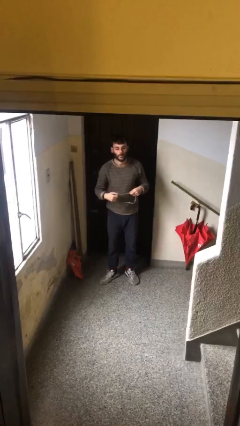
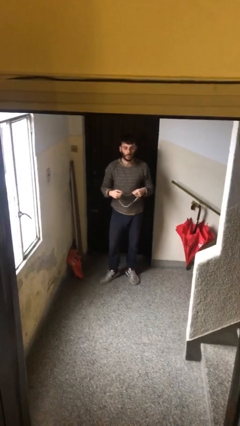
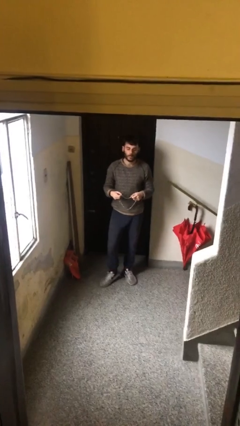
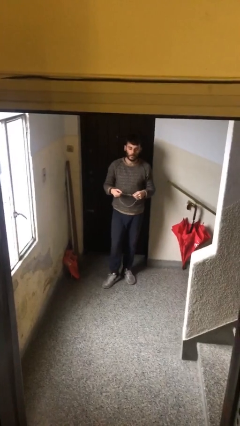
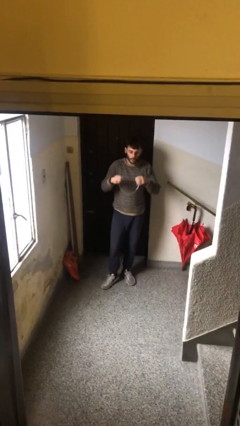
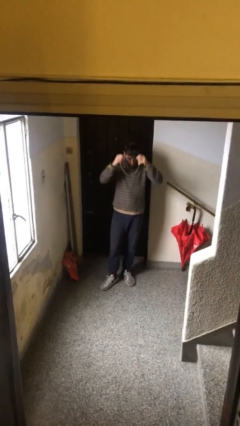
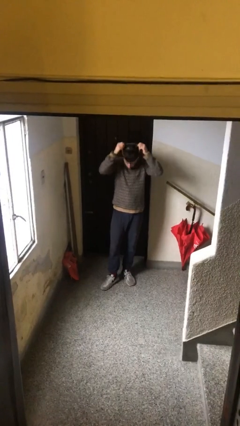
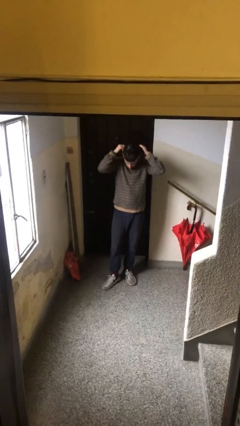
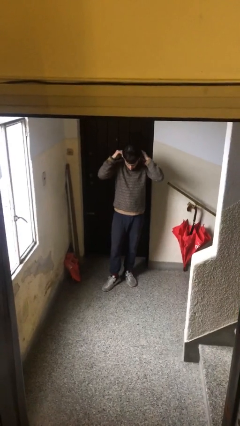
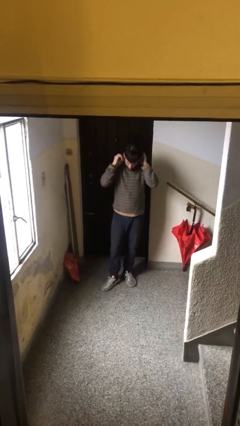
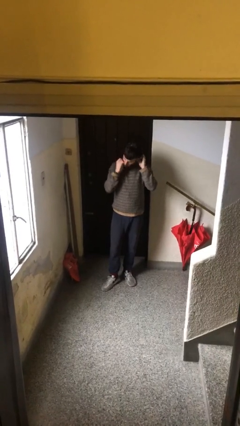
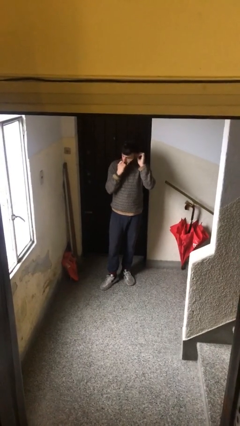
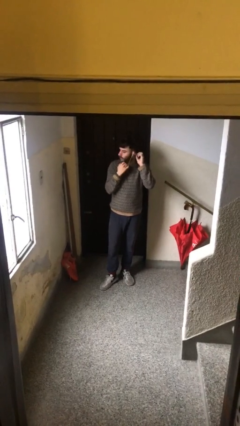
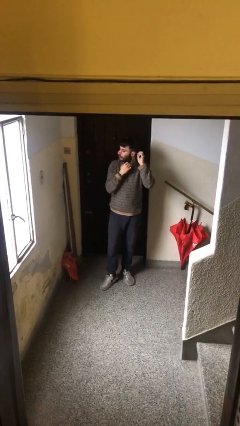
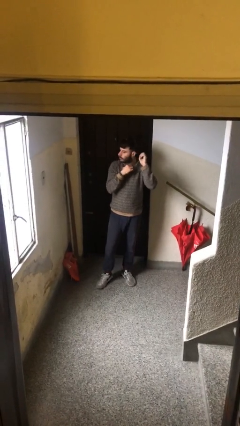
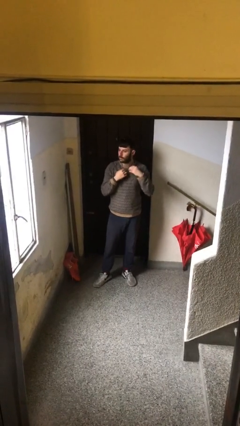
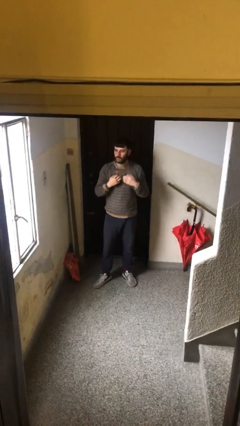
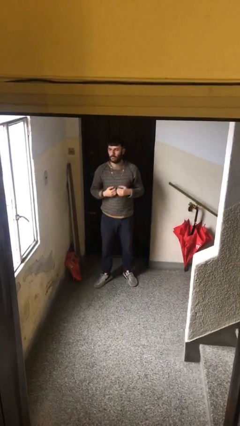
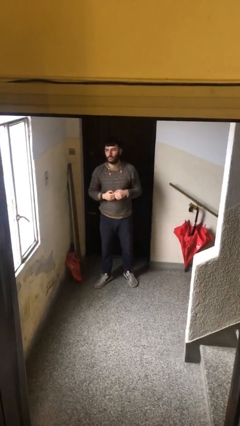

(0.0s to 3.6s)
person puts on necklace

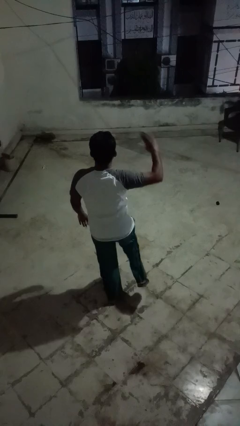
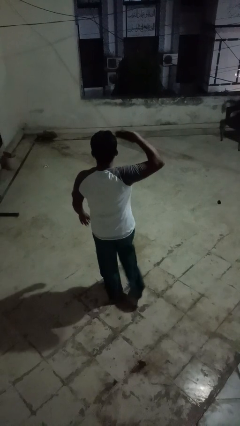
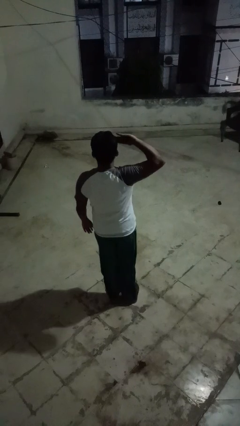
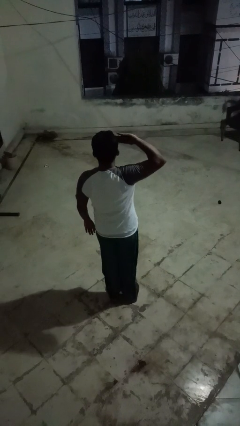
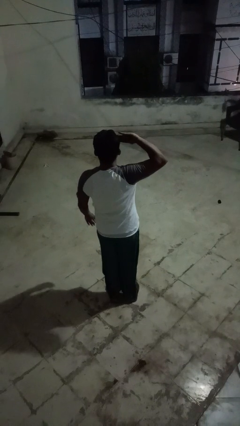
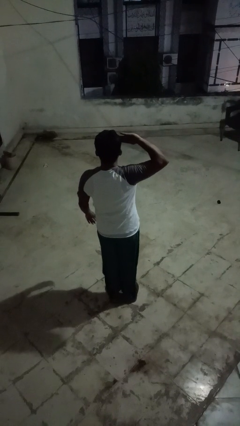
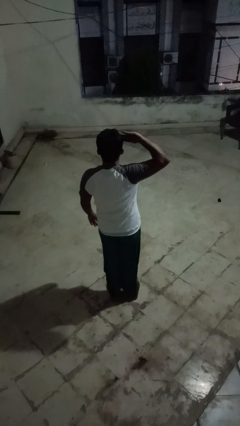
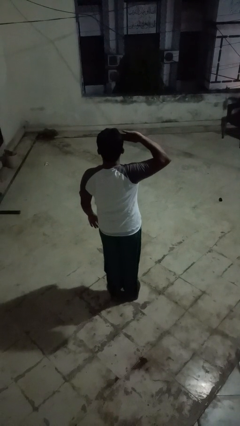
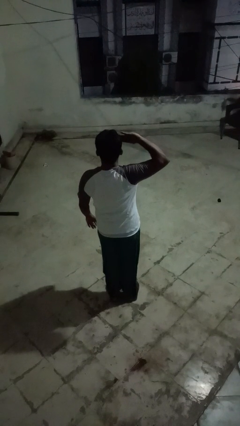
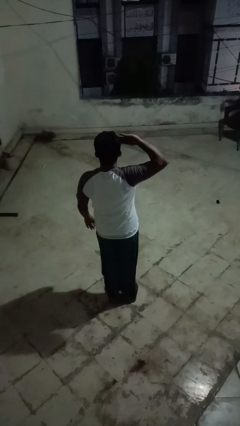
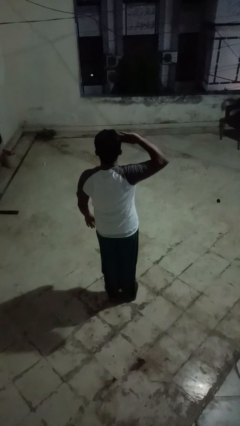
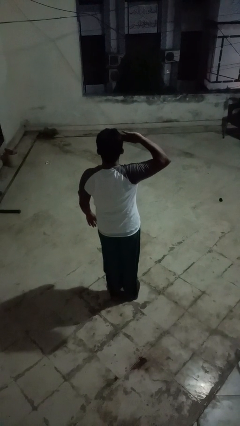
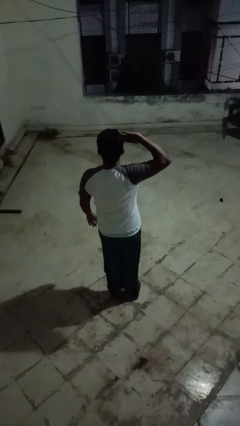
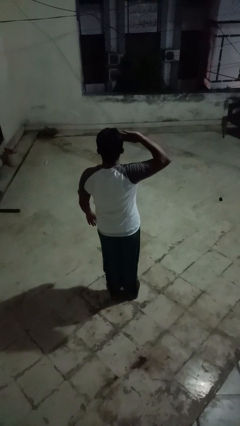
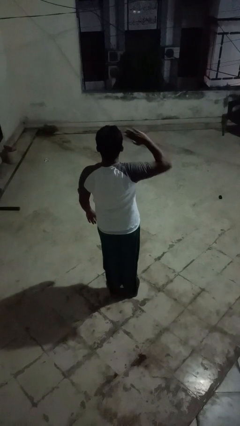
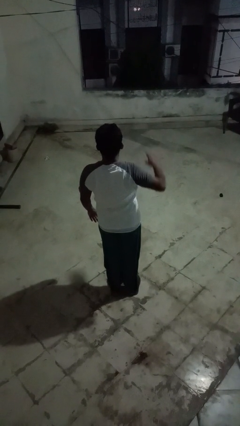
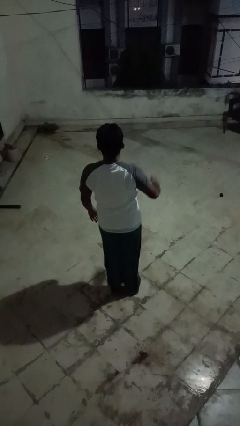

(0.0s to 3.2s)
person salutes

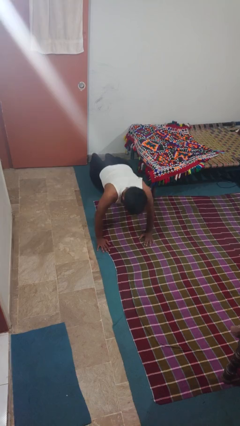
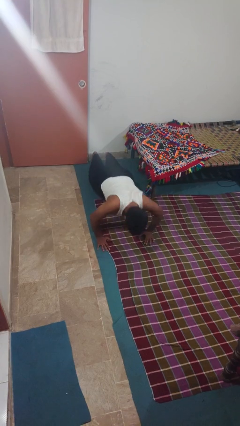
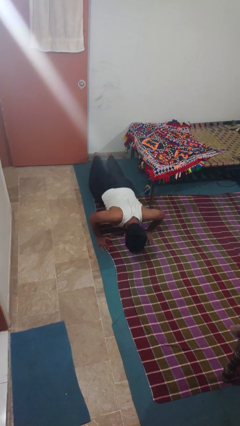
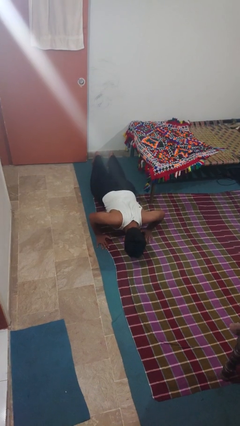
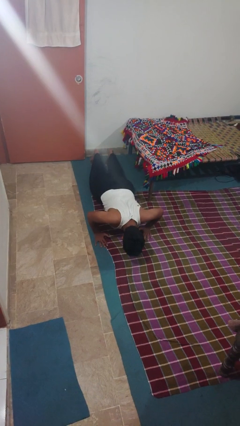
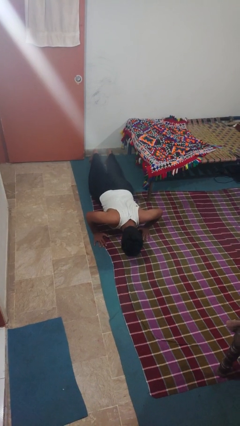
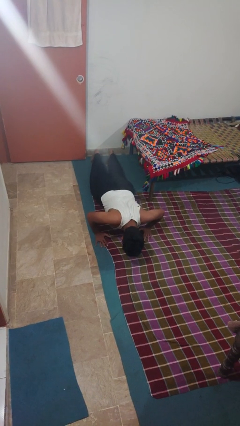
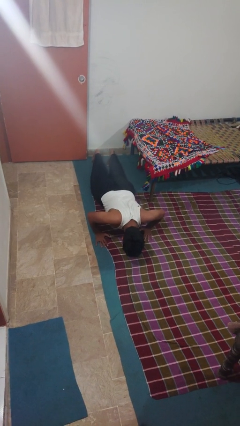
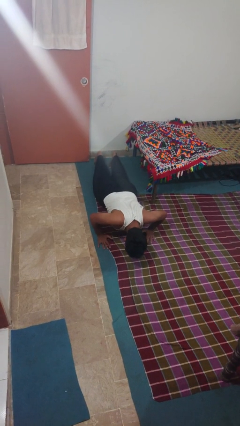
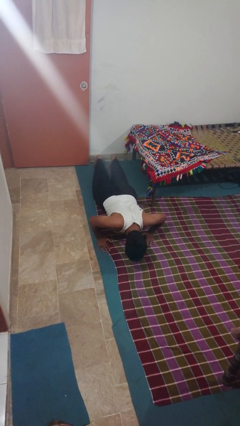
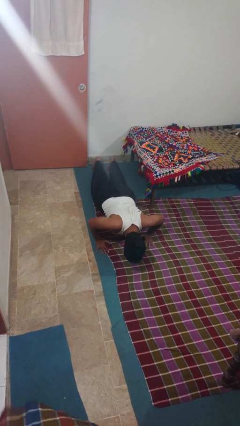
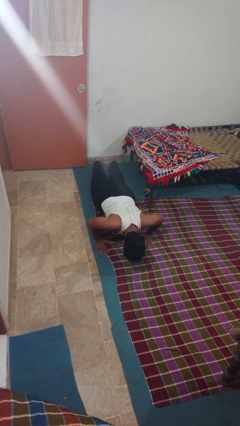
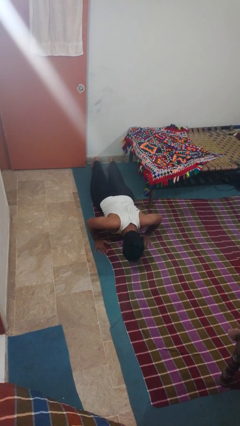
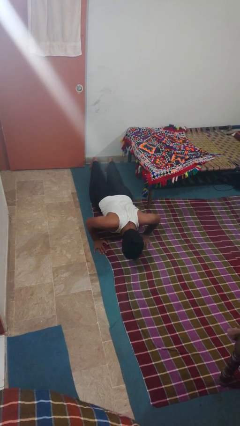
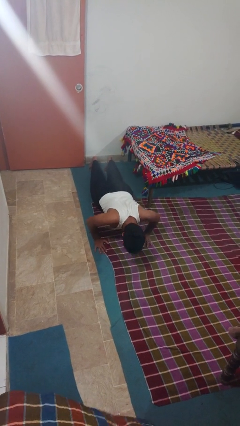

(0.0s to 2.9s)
person exercises with pushup

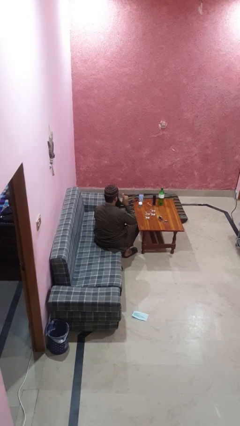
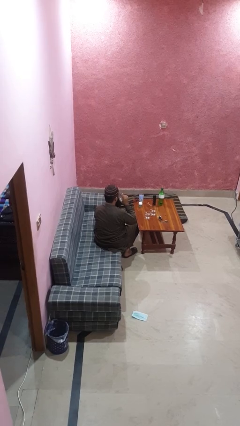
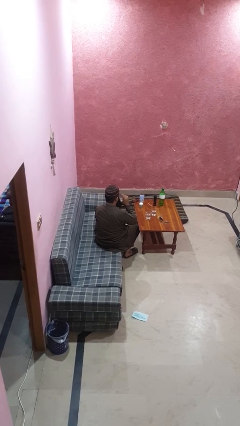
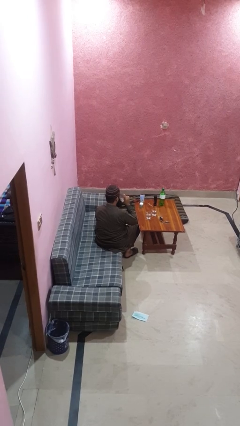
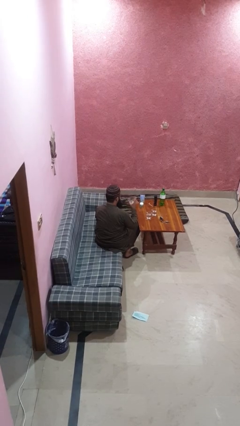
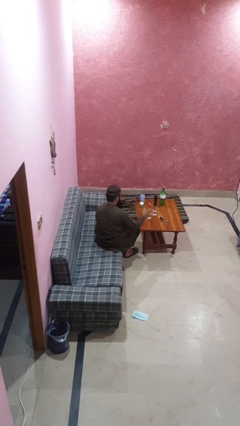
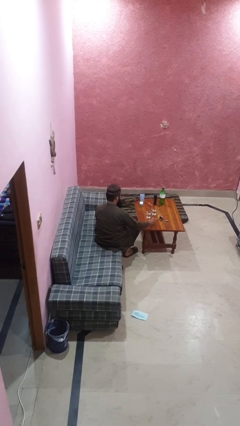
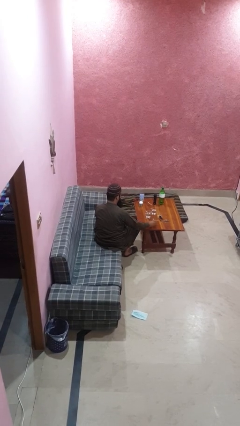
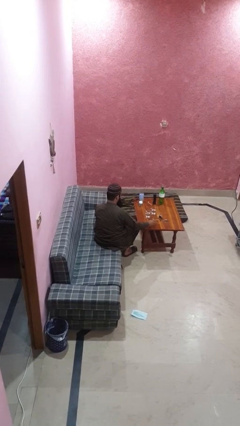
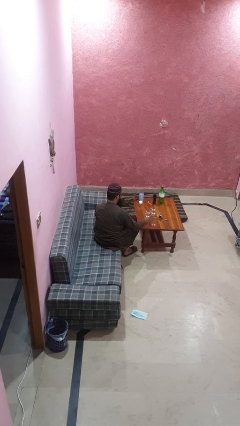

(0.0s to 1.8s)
person puts down object on table

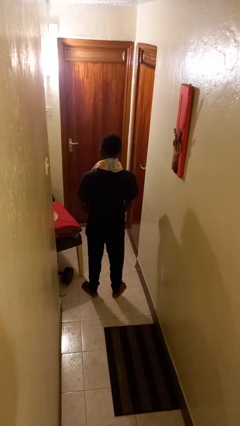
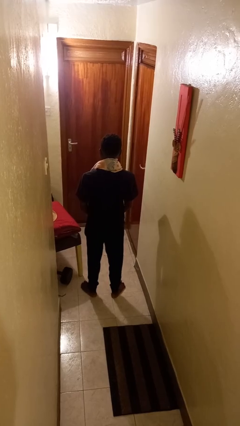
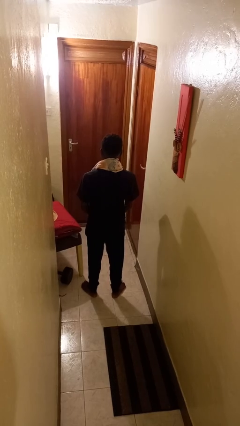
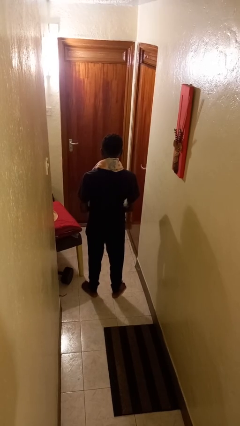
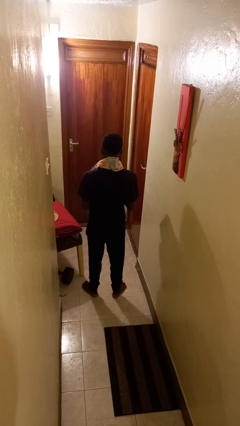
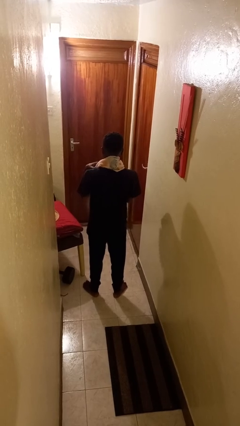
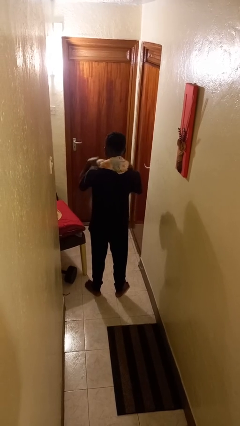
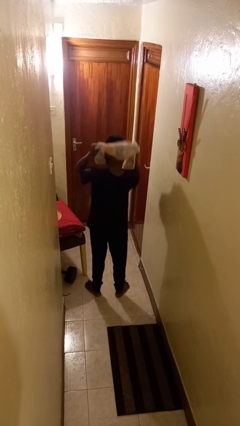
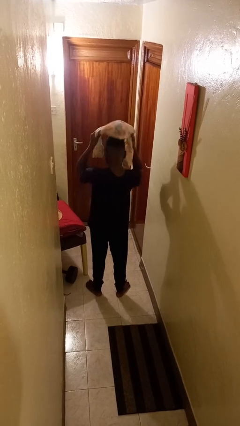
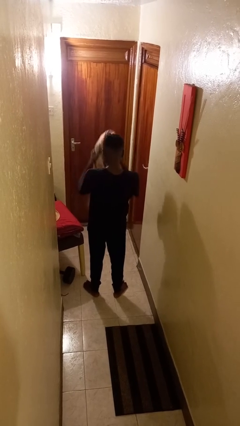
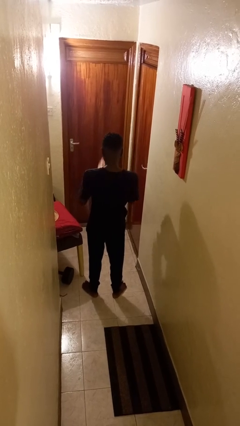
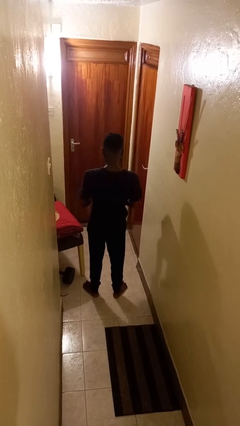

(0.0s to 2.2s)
person takes off scarf

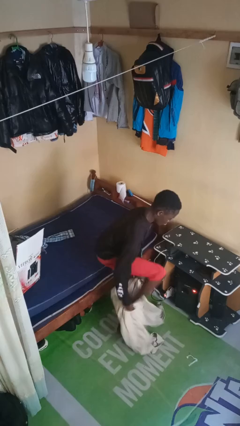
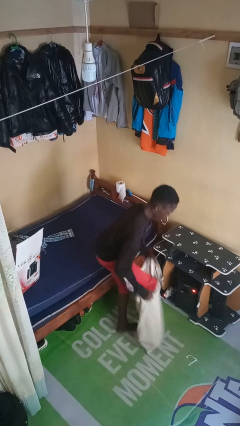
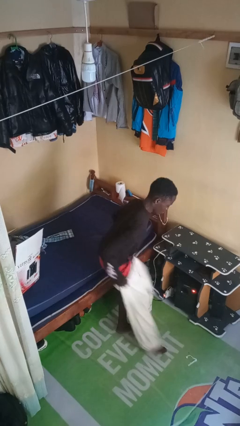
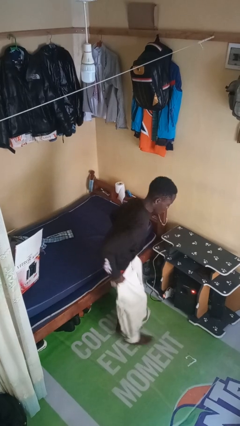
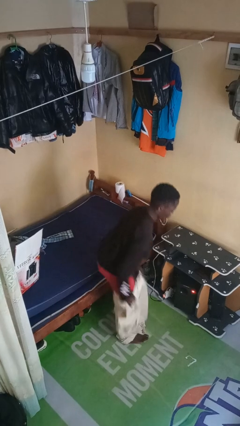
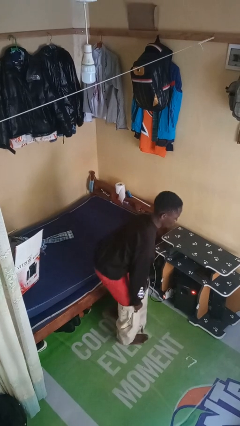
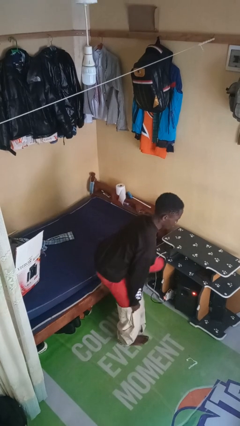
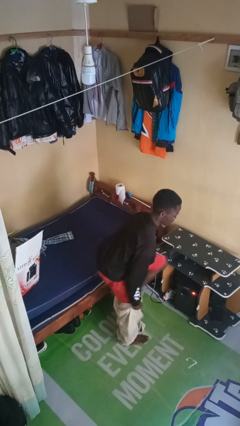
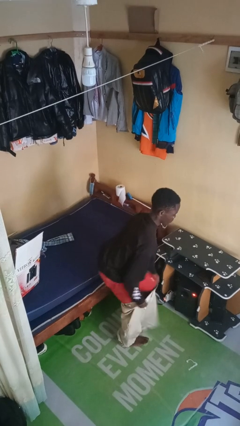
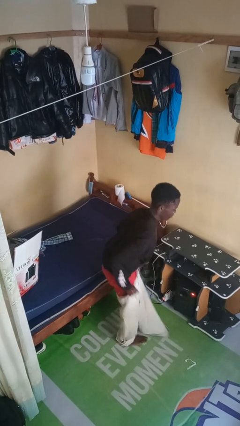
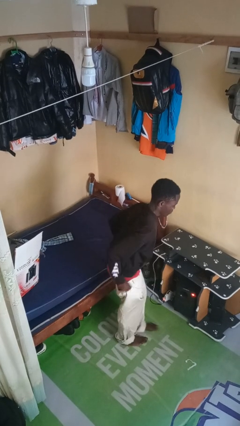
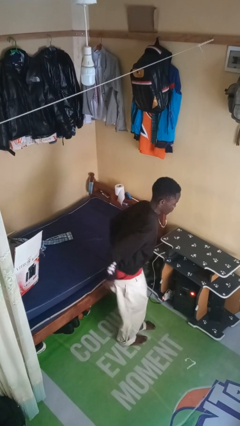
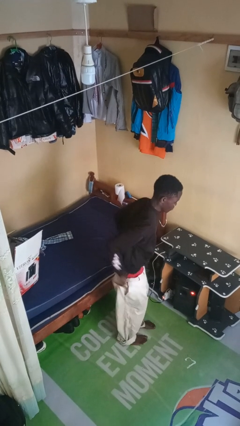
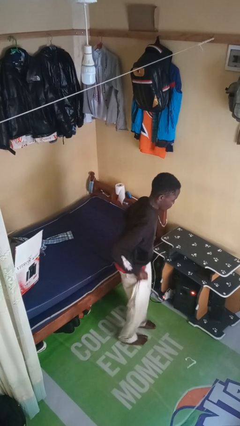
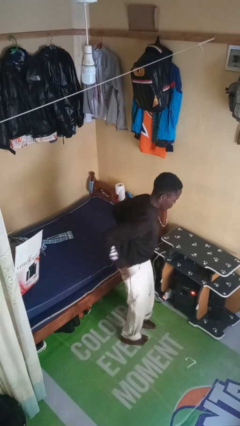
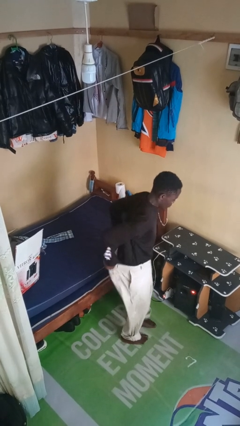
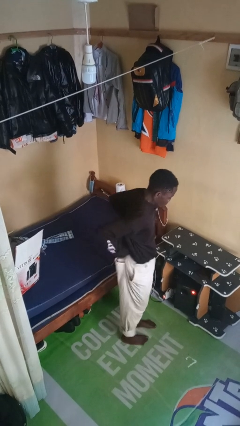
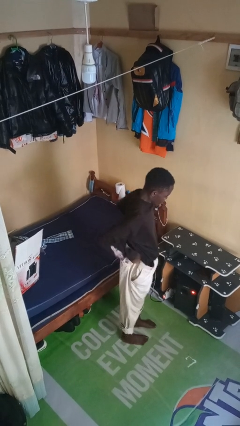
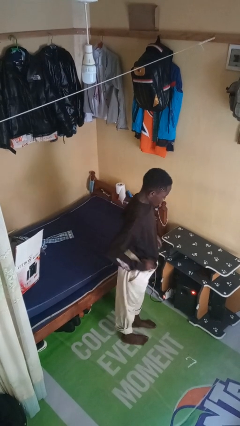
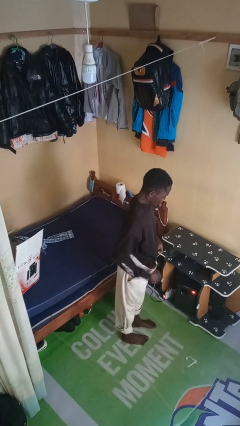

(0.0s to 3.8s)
person puts on pants
